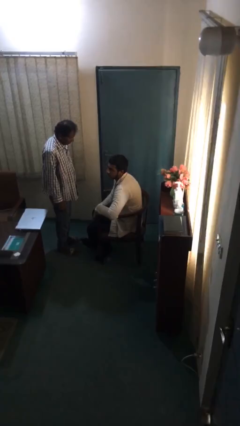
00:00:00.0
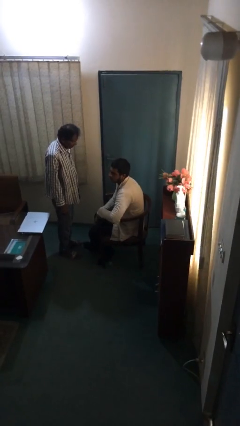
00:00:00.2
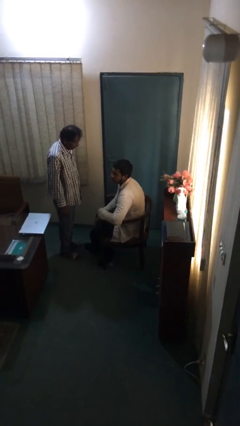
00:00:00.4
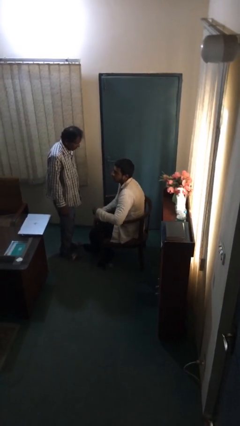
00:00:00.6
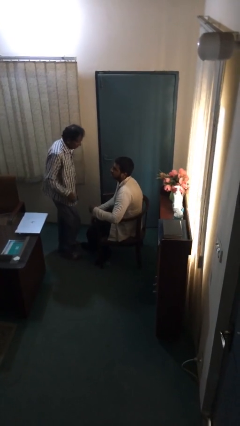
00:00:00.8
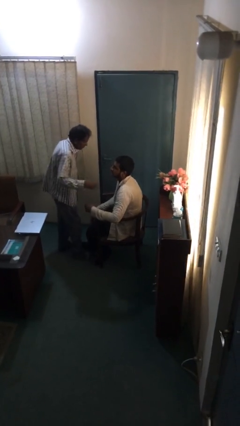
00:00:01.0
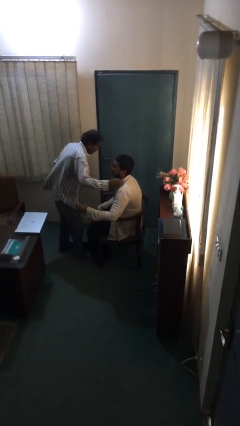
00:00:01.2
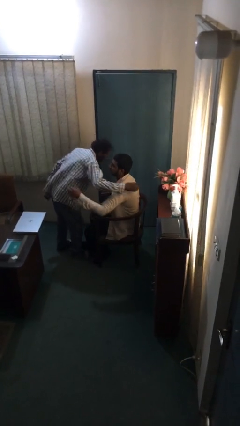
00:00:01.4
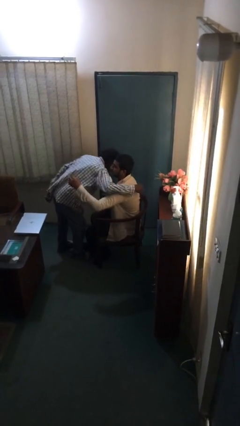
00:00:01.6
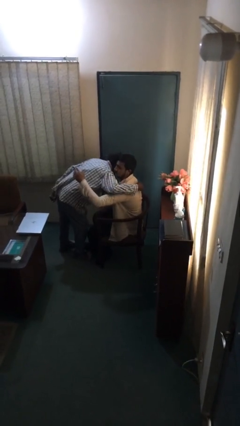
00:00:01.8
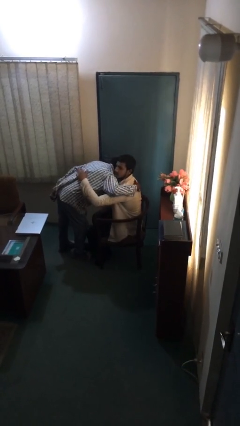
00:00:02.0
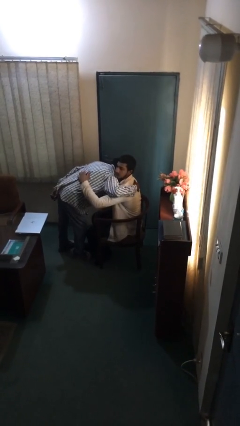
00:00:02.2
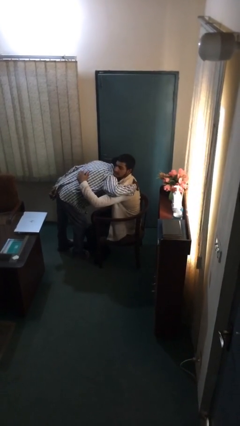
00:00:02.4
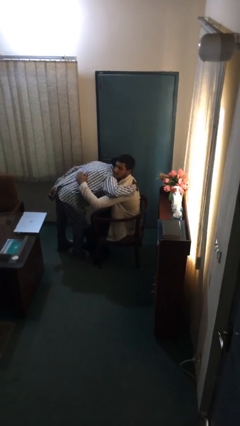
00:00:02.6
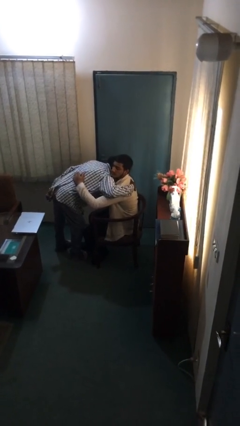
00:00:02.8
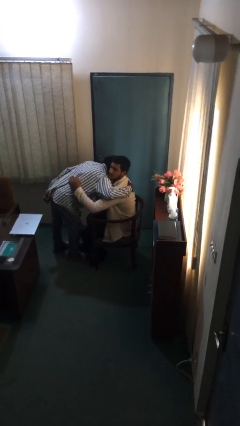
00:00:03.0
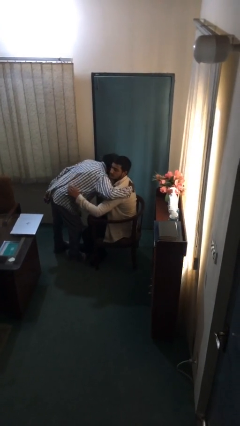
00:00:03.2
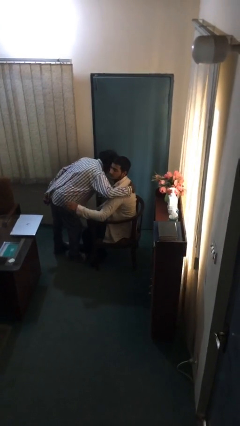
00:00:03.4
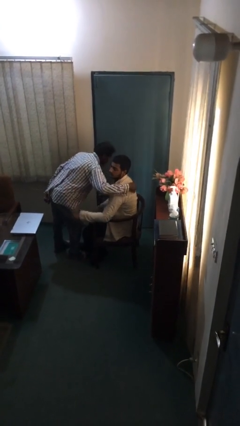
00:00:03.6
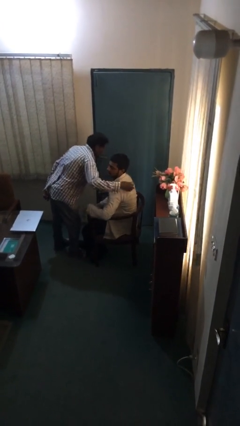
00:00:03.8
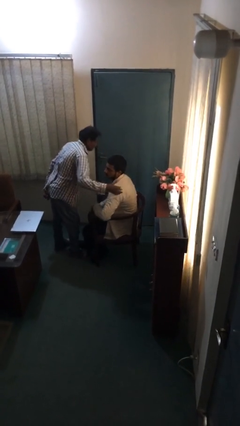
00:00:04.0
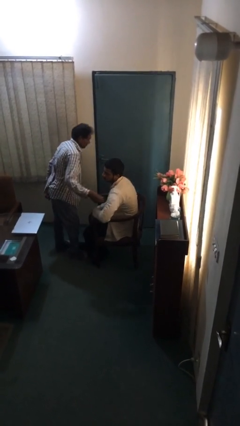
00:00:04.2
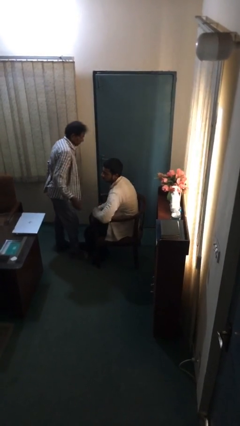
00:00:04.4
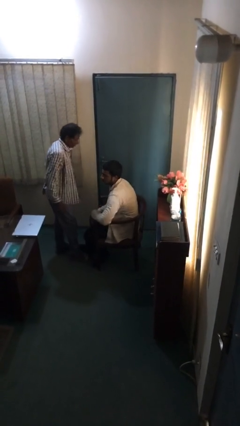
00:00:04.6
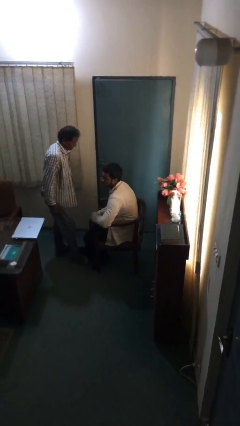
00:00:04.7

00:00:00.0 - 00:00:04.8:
person embraces person

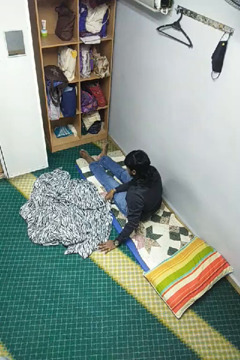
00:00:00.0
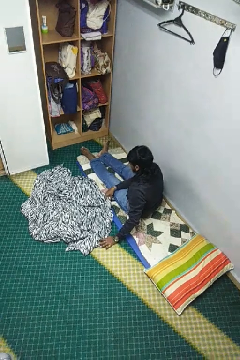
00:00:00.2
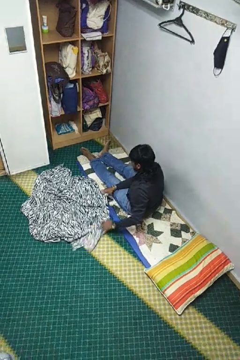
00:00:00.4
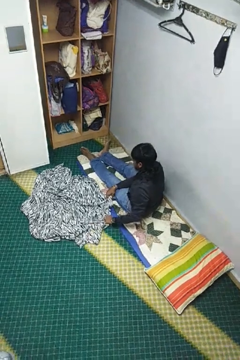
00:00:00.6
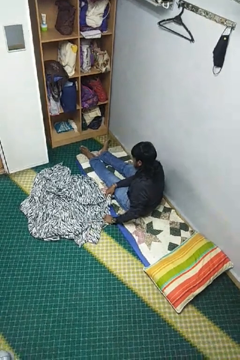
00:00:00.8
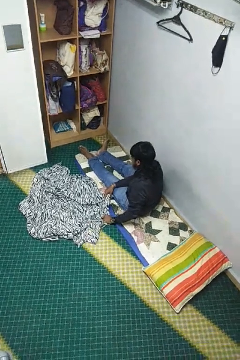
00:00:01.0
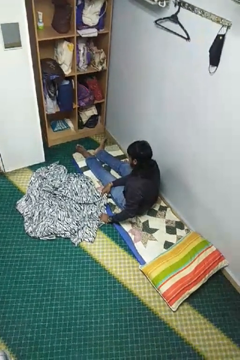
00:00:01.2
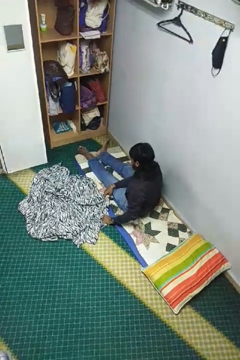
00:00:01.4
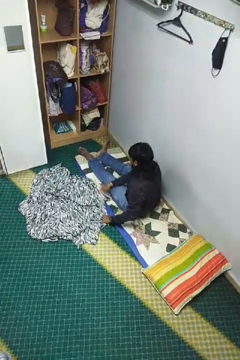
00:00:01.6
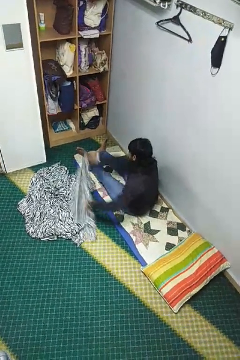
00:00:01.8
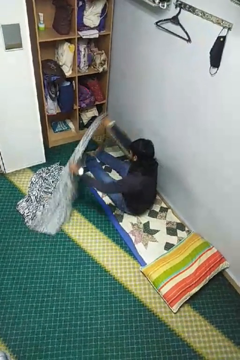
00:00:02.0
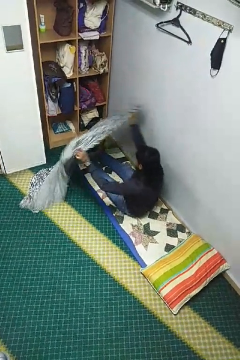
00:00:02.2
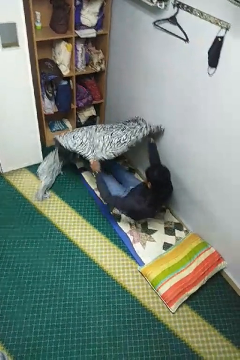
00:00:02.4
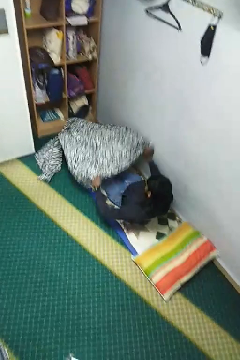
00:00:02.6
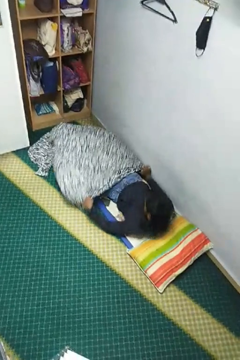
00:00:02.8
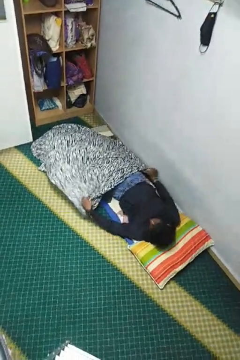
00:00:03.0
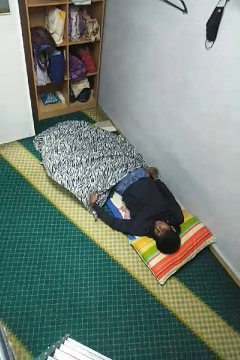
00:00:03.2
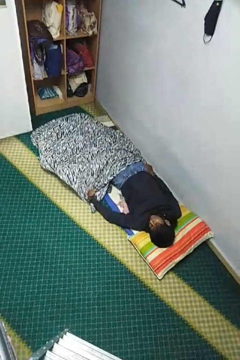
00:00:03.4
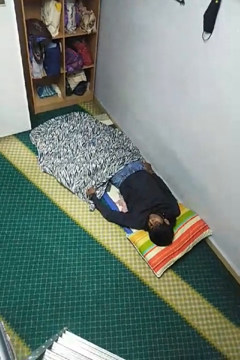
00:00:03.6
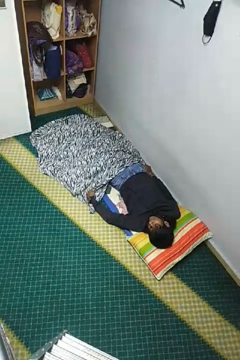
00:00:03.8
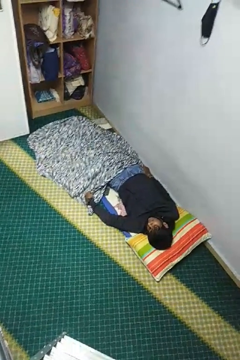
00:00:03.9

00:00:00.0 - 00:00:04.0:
person covers with blanket

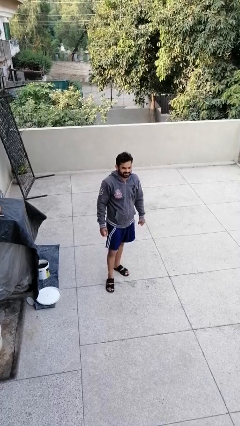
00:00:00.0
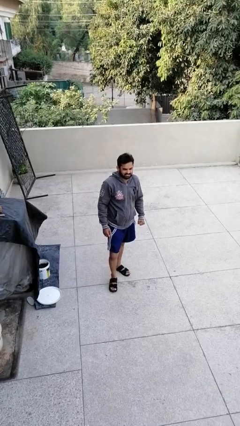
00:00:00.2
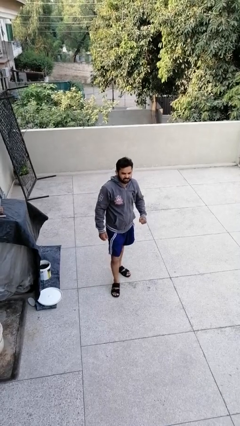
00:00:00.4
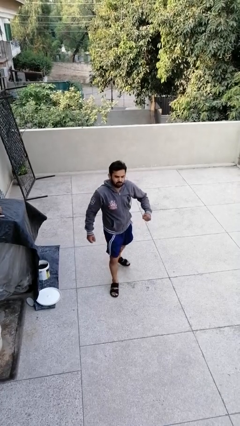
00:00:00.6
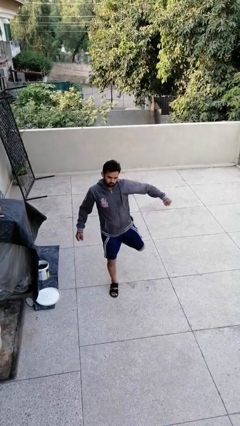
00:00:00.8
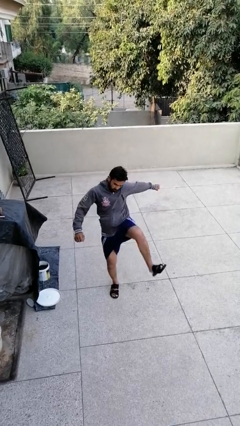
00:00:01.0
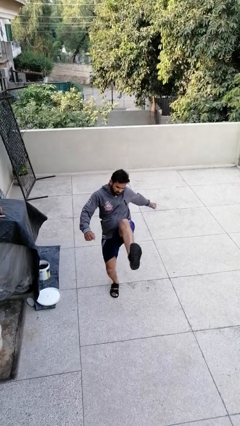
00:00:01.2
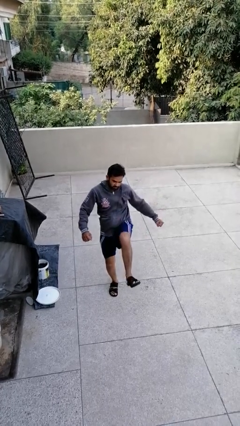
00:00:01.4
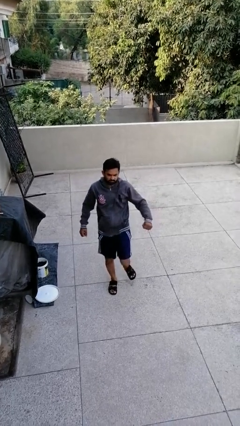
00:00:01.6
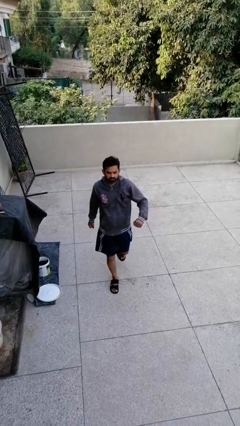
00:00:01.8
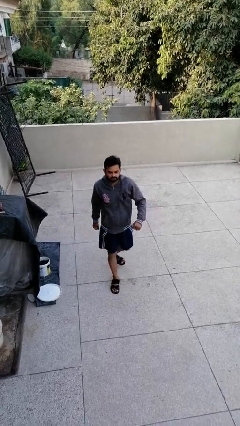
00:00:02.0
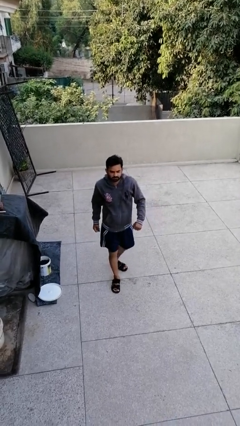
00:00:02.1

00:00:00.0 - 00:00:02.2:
person karate kicks

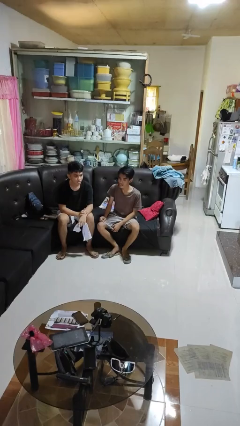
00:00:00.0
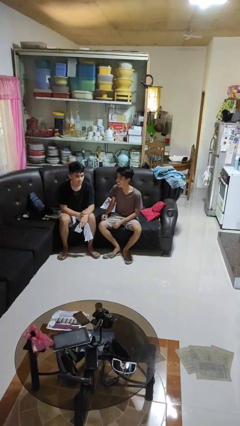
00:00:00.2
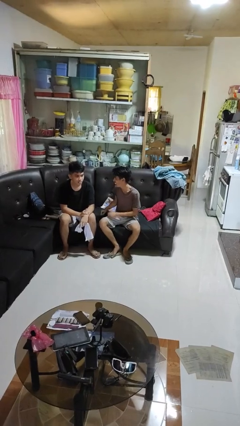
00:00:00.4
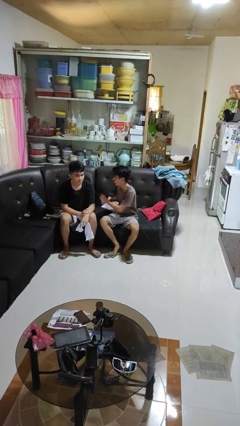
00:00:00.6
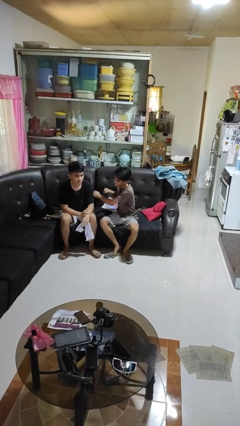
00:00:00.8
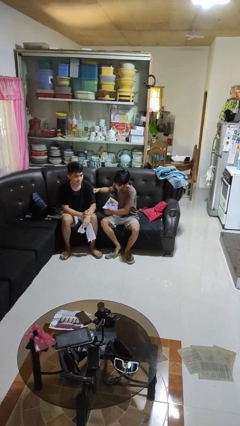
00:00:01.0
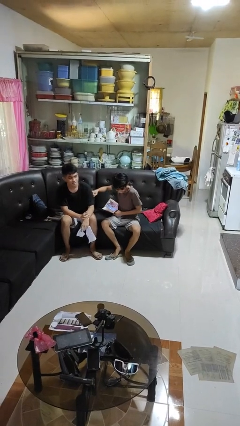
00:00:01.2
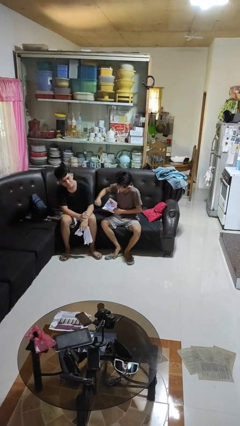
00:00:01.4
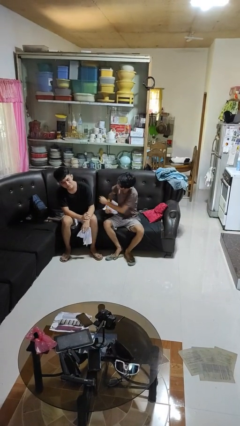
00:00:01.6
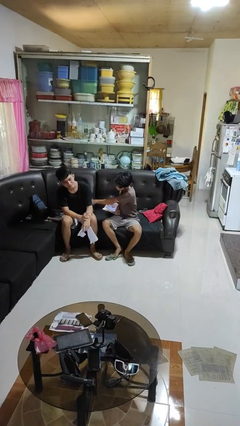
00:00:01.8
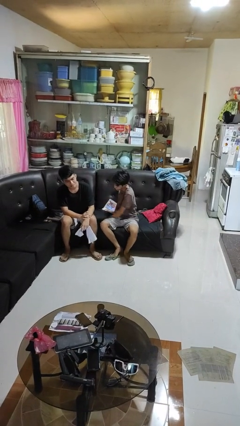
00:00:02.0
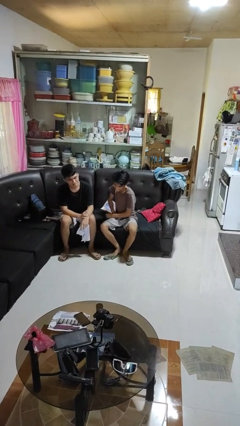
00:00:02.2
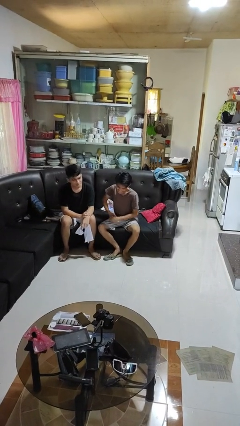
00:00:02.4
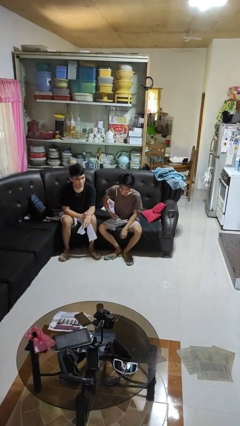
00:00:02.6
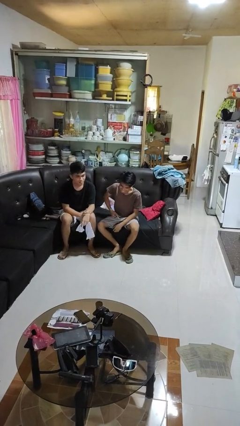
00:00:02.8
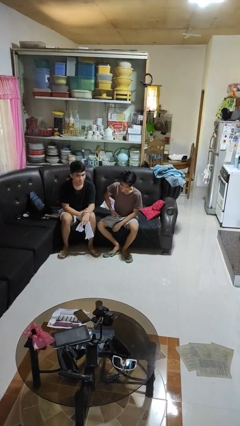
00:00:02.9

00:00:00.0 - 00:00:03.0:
person pounds shoulders of person

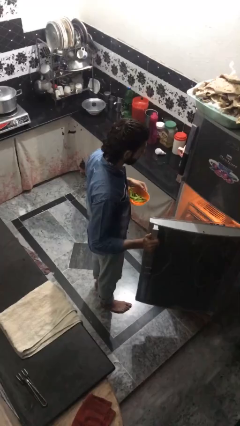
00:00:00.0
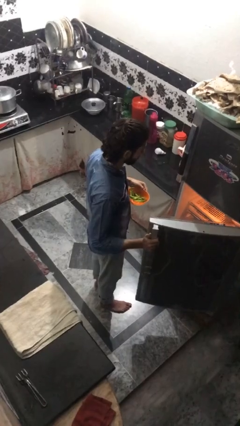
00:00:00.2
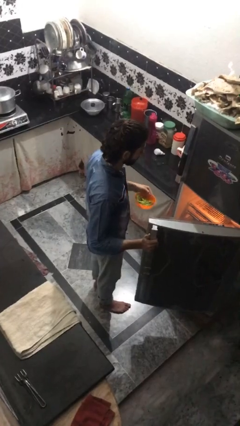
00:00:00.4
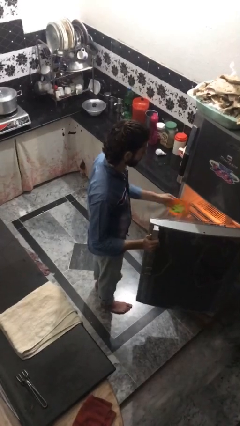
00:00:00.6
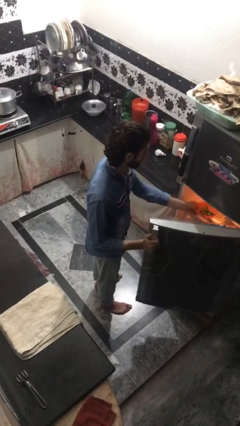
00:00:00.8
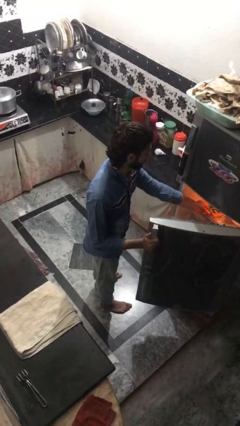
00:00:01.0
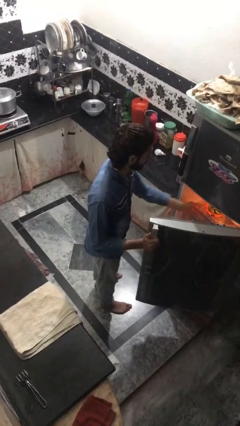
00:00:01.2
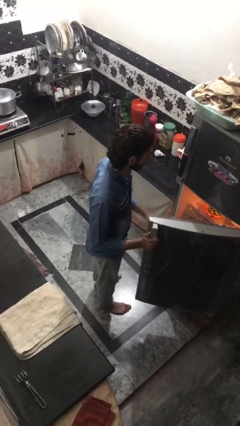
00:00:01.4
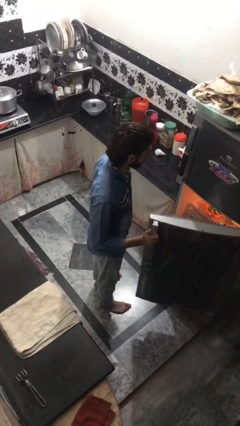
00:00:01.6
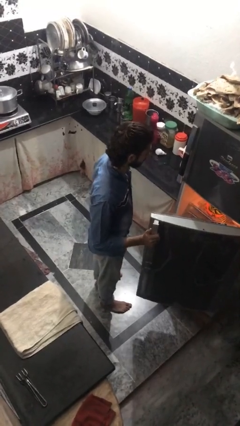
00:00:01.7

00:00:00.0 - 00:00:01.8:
person puts object into refrigerator

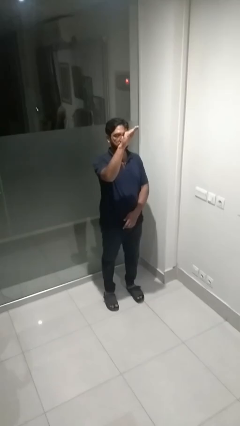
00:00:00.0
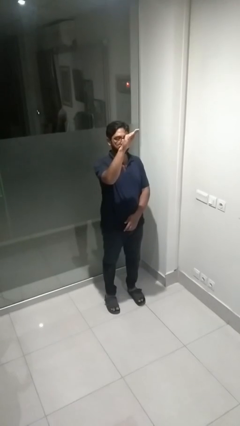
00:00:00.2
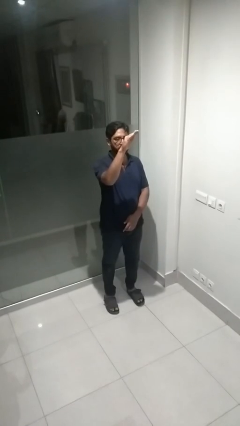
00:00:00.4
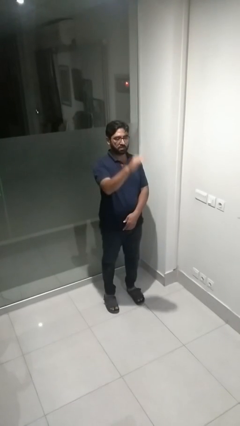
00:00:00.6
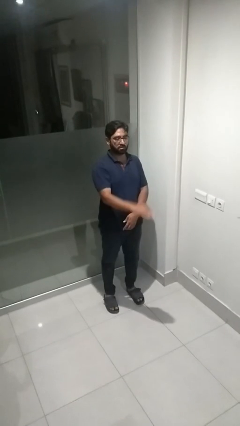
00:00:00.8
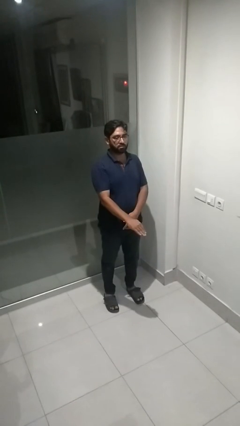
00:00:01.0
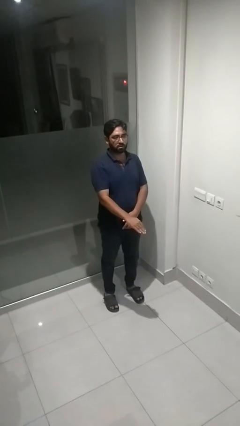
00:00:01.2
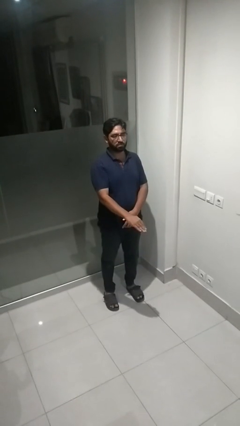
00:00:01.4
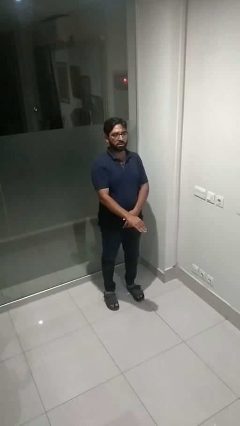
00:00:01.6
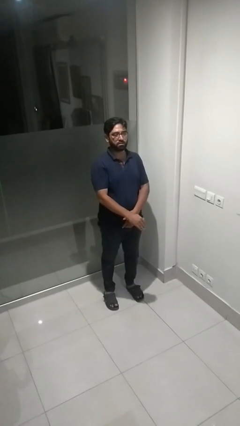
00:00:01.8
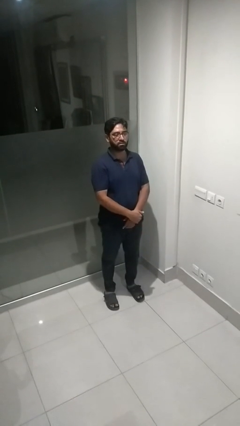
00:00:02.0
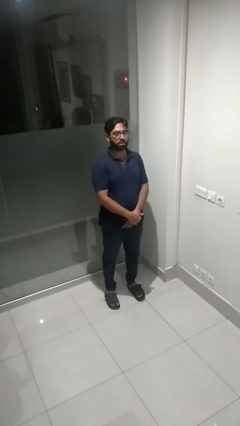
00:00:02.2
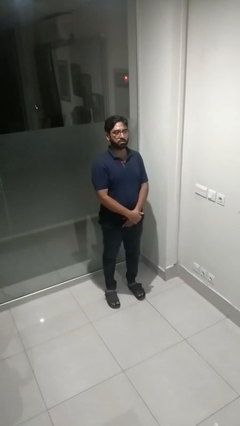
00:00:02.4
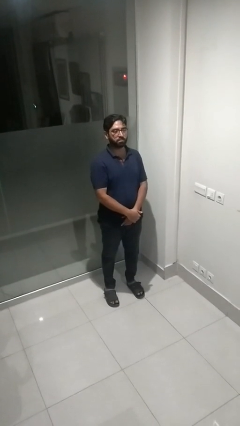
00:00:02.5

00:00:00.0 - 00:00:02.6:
person gestures swipe down
